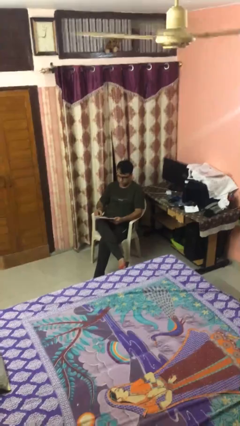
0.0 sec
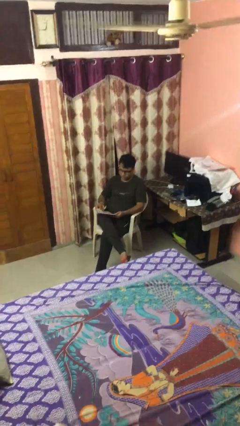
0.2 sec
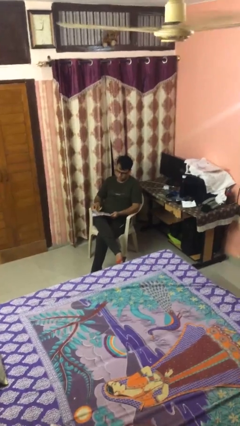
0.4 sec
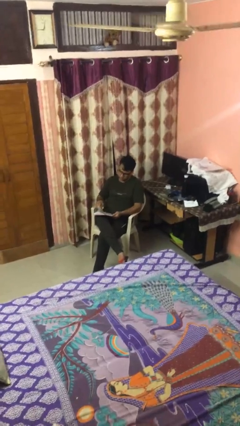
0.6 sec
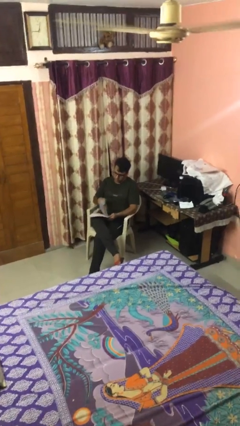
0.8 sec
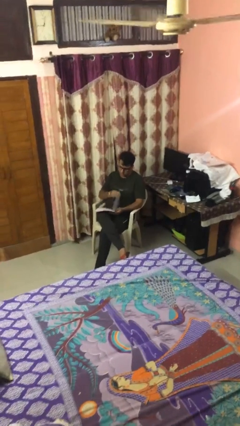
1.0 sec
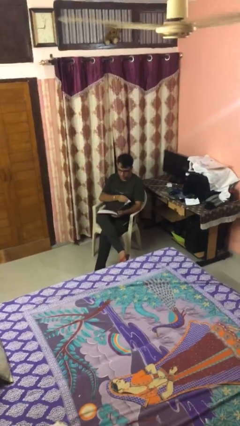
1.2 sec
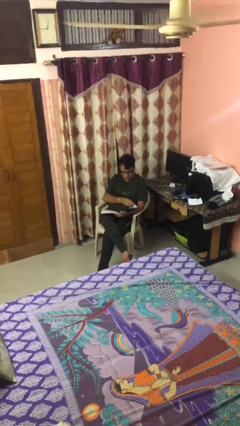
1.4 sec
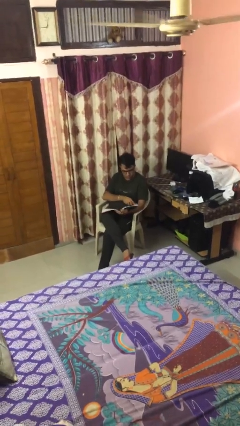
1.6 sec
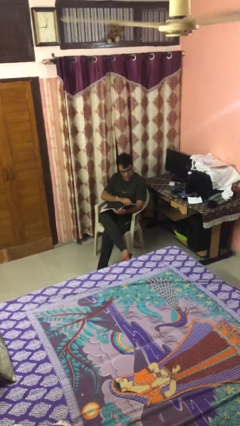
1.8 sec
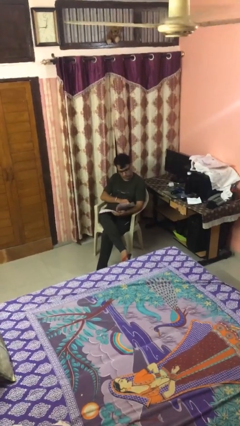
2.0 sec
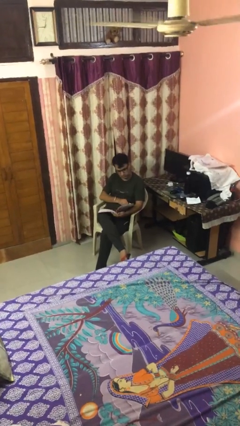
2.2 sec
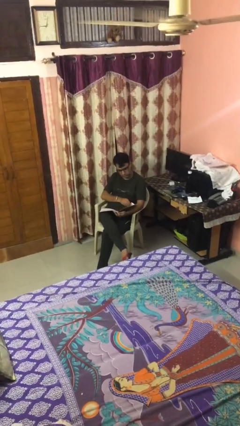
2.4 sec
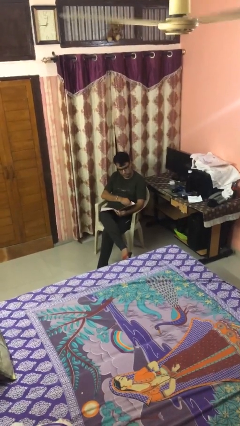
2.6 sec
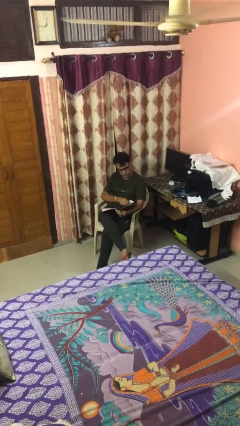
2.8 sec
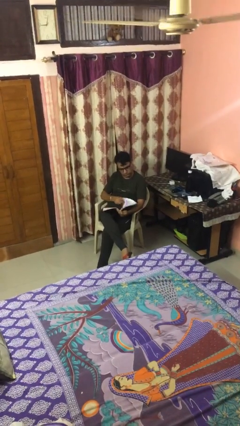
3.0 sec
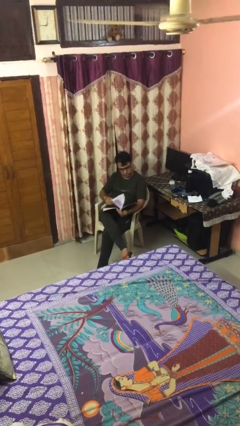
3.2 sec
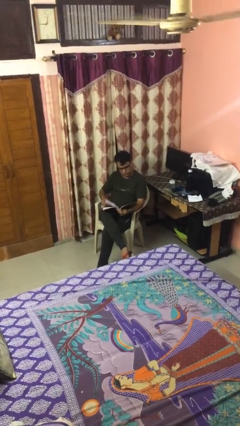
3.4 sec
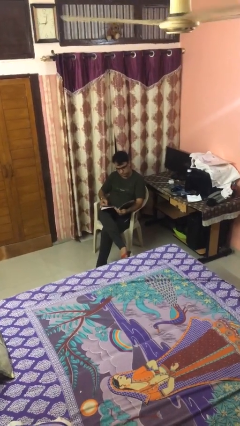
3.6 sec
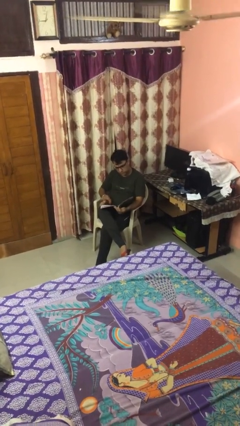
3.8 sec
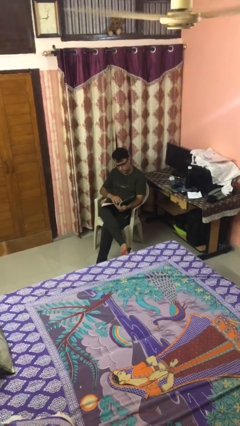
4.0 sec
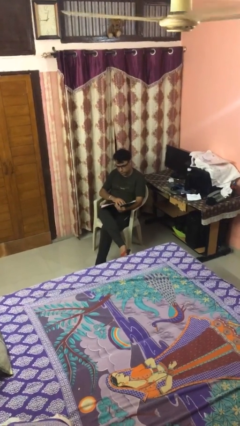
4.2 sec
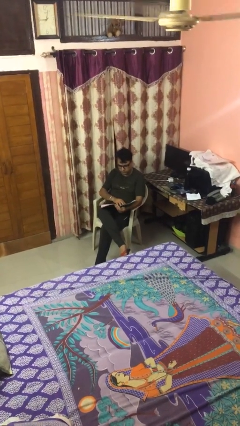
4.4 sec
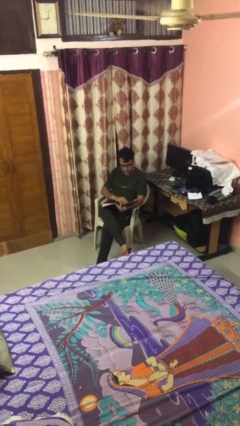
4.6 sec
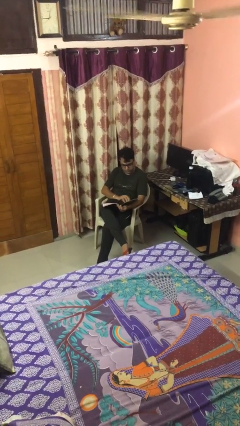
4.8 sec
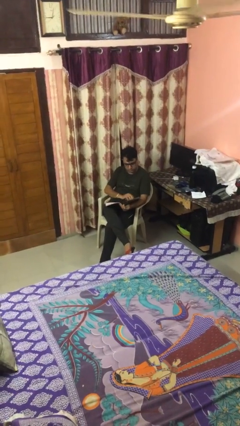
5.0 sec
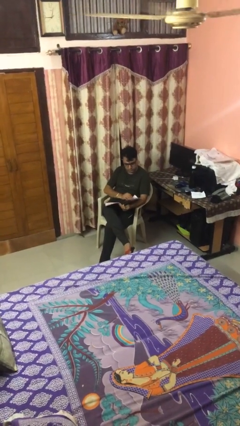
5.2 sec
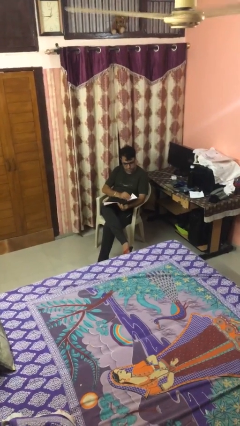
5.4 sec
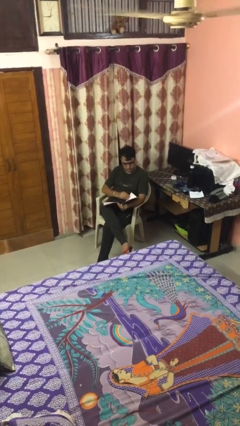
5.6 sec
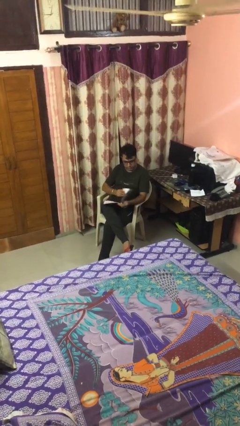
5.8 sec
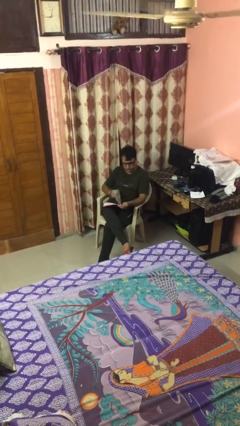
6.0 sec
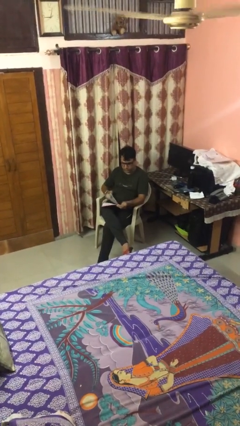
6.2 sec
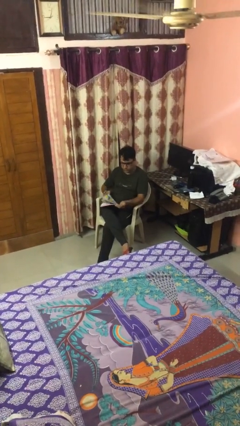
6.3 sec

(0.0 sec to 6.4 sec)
person reads magazine

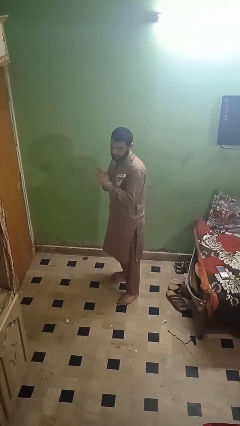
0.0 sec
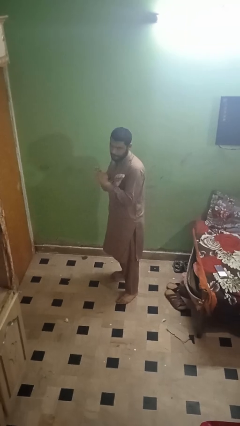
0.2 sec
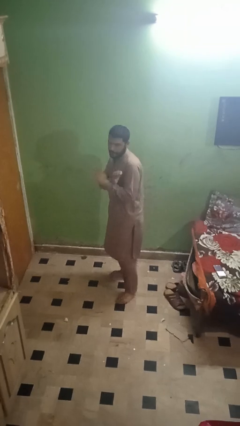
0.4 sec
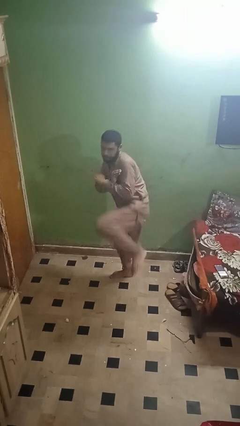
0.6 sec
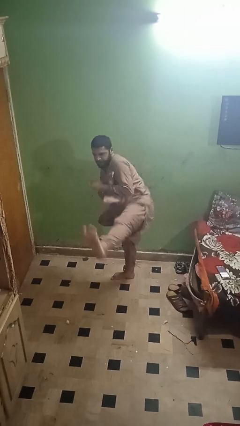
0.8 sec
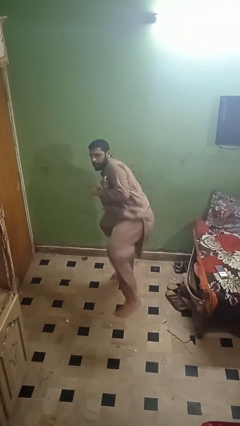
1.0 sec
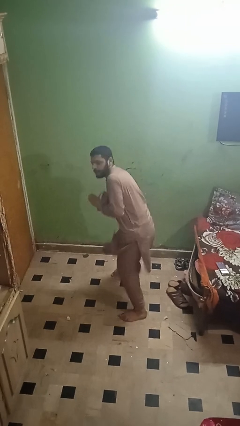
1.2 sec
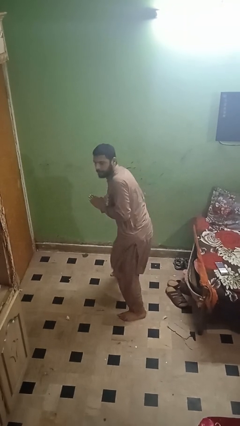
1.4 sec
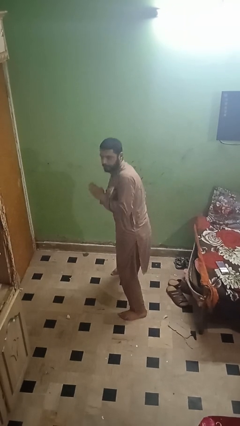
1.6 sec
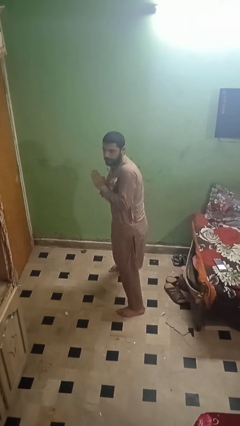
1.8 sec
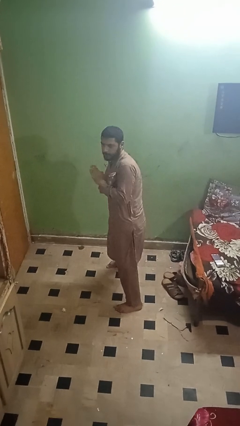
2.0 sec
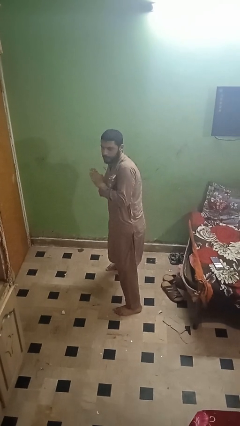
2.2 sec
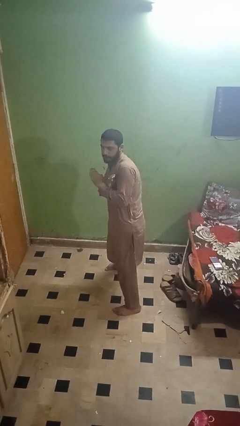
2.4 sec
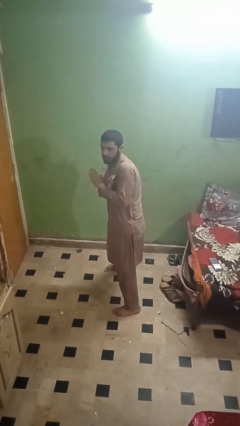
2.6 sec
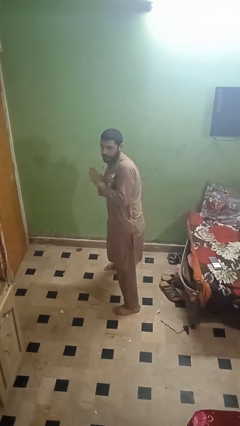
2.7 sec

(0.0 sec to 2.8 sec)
person karate kicks

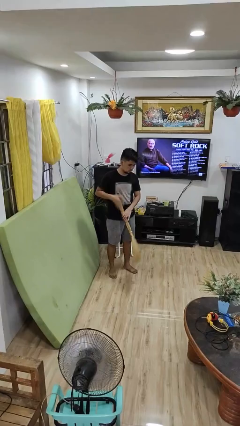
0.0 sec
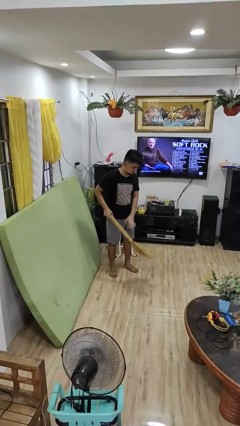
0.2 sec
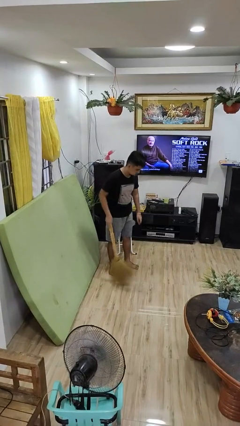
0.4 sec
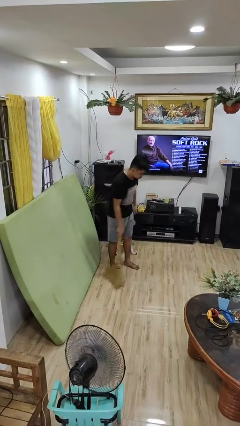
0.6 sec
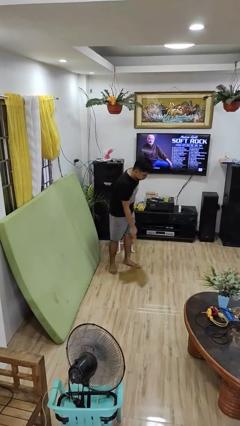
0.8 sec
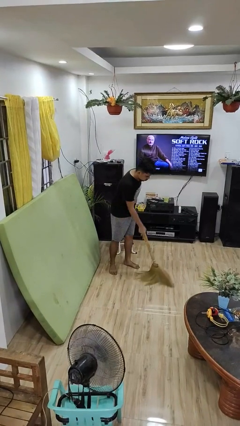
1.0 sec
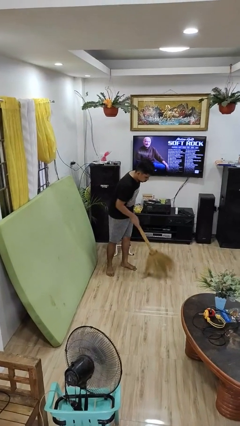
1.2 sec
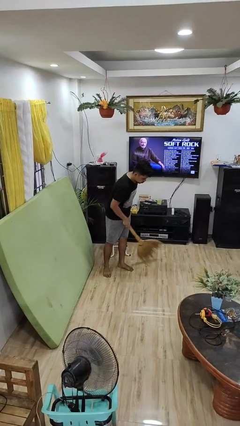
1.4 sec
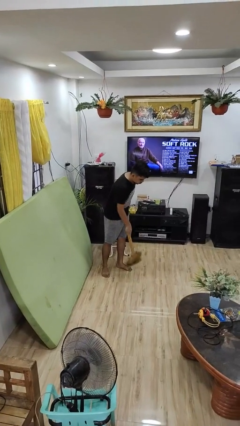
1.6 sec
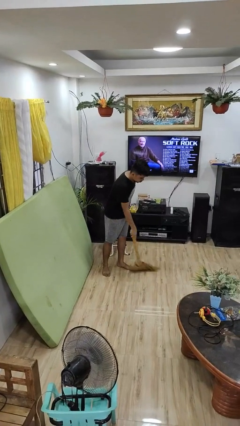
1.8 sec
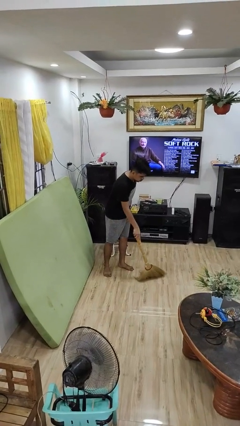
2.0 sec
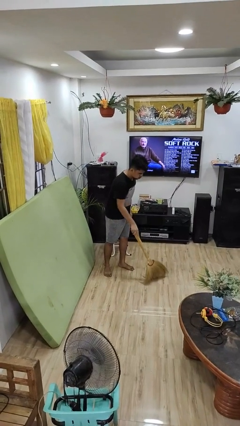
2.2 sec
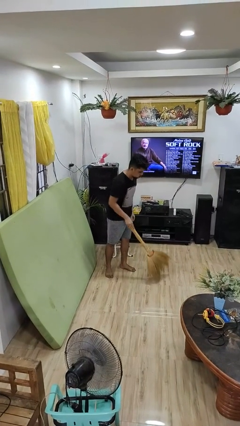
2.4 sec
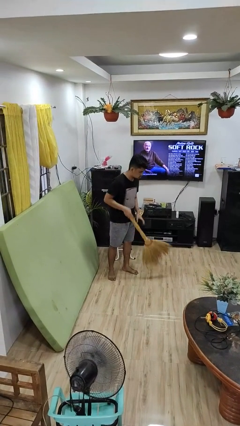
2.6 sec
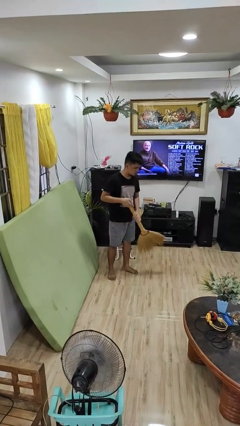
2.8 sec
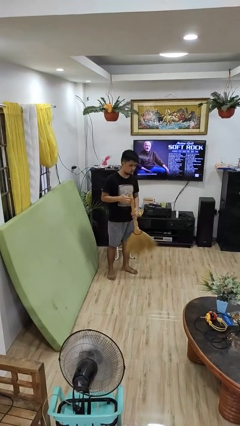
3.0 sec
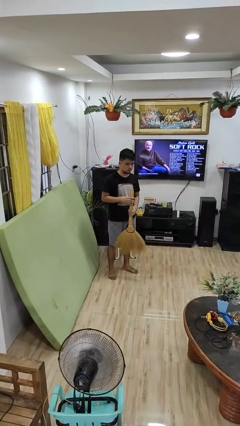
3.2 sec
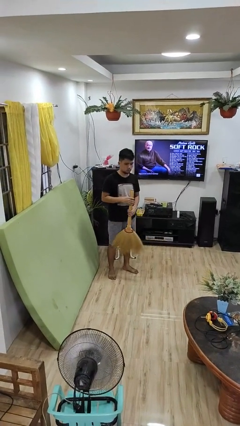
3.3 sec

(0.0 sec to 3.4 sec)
person sweeps floor

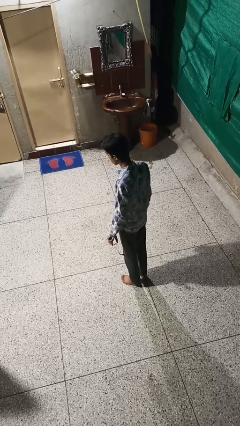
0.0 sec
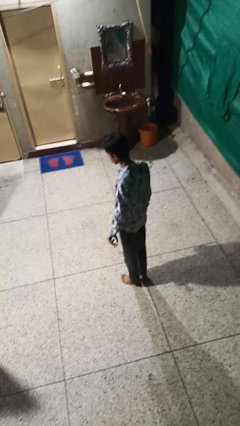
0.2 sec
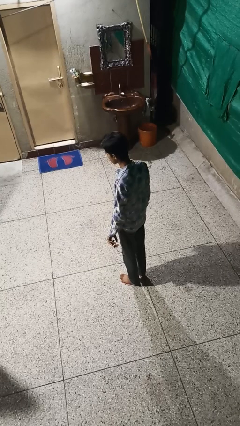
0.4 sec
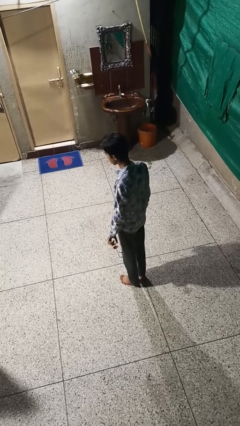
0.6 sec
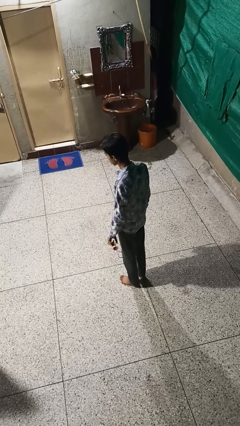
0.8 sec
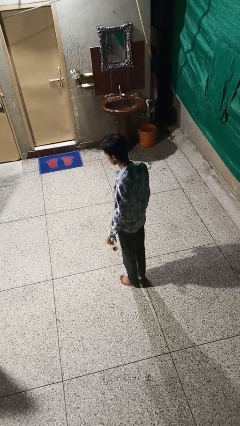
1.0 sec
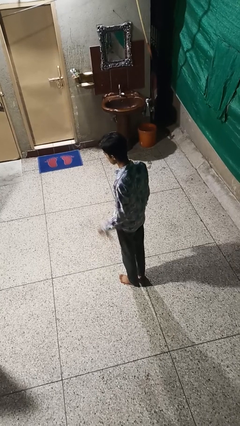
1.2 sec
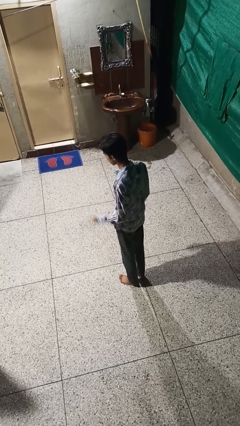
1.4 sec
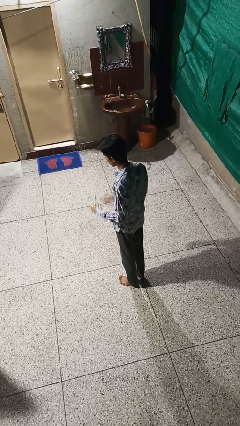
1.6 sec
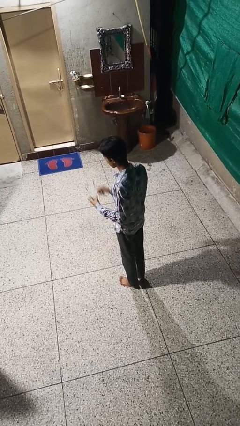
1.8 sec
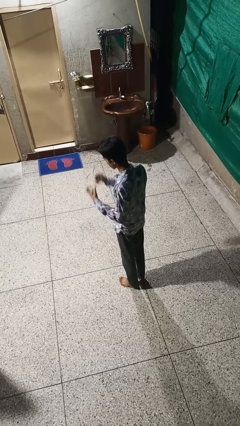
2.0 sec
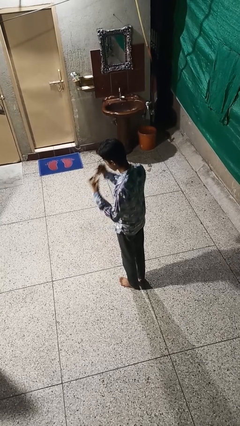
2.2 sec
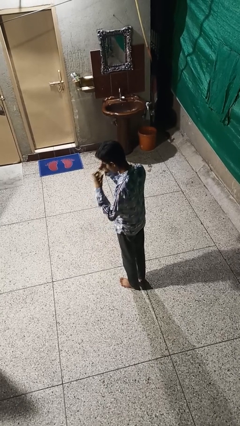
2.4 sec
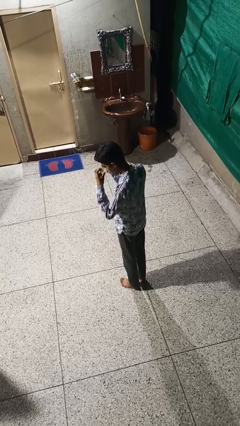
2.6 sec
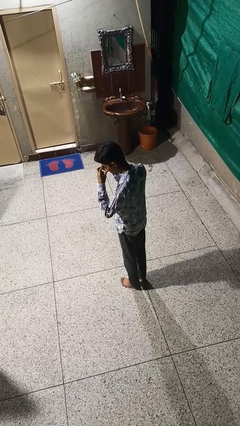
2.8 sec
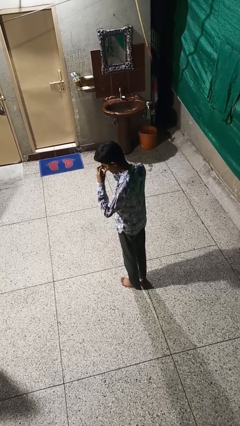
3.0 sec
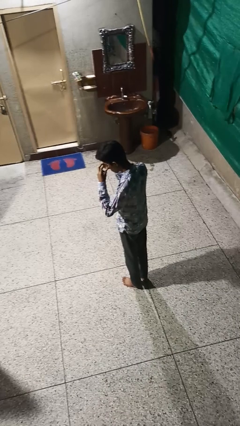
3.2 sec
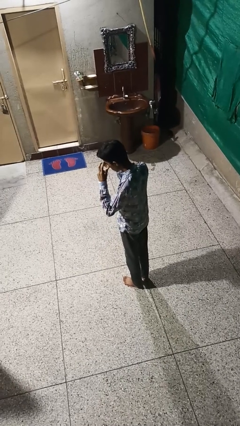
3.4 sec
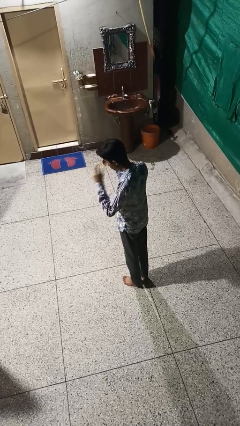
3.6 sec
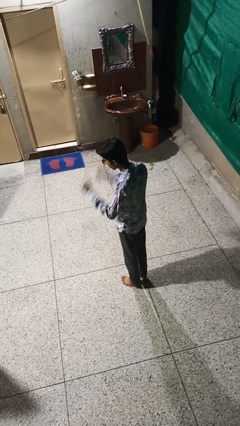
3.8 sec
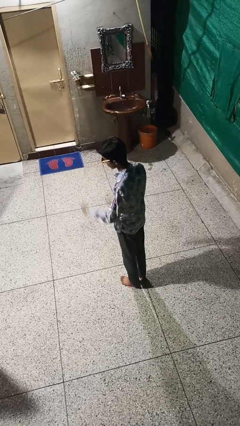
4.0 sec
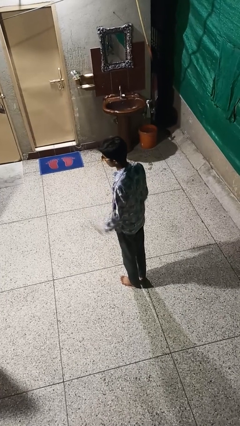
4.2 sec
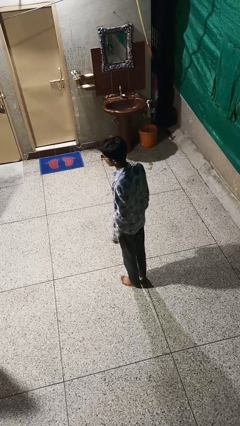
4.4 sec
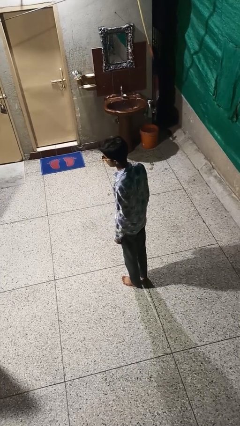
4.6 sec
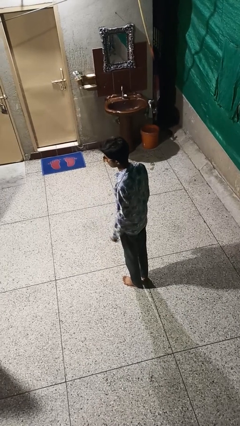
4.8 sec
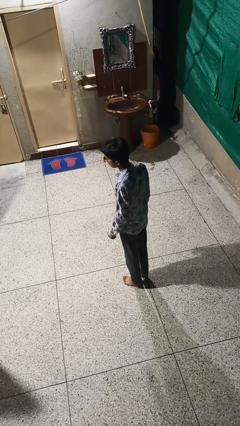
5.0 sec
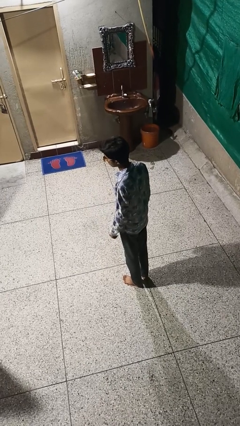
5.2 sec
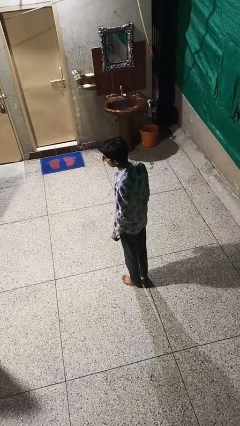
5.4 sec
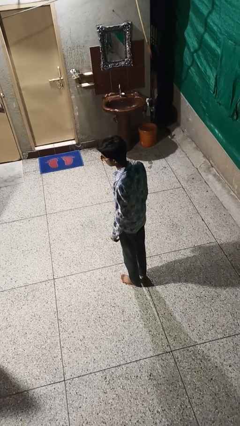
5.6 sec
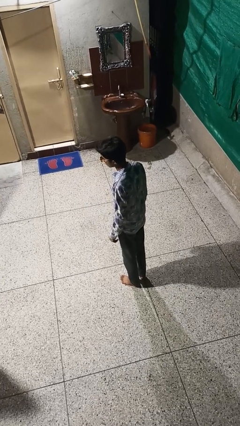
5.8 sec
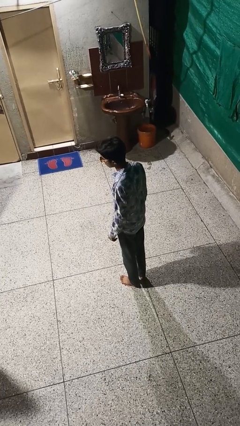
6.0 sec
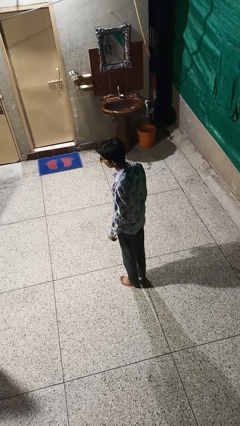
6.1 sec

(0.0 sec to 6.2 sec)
person puts on sunglasses
